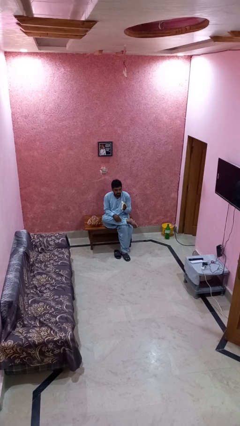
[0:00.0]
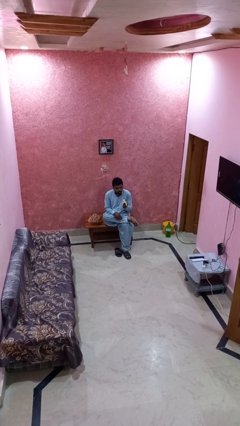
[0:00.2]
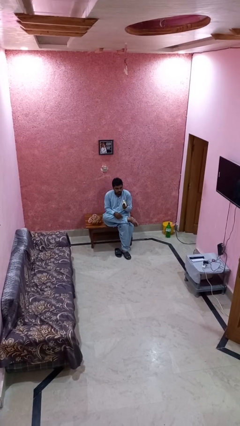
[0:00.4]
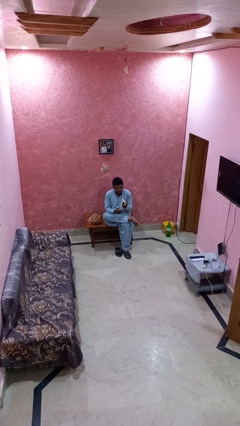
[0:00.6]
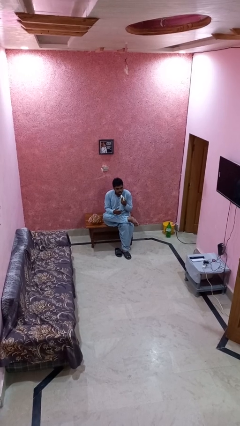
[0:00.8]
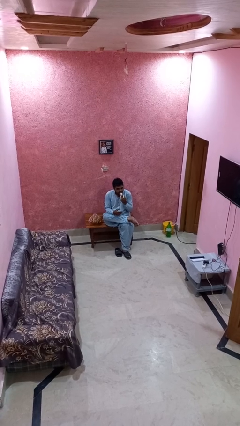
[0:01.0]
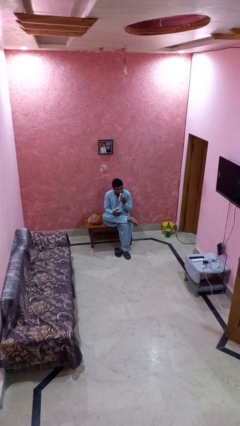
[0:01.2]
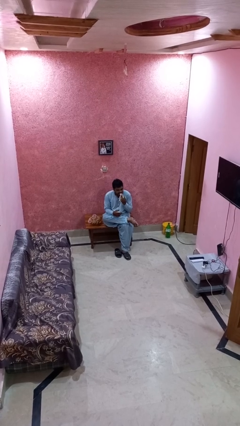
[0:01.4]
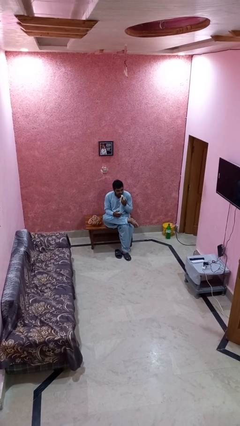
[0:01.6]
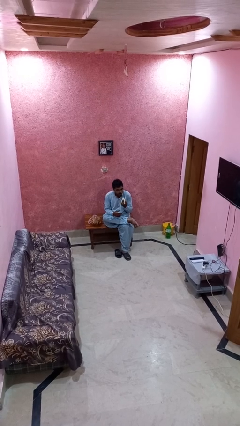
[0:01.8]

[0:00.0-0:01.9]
person eats banana

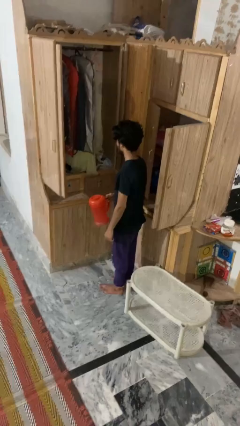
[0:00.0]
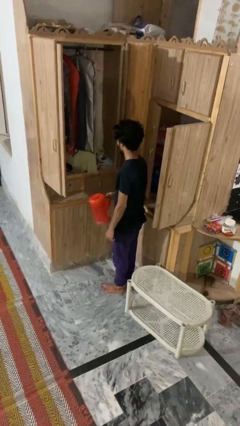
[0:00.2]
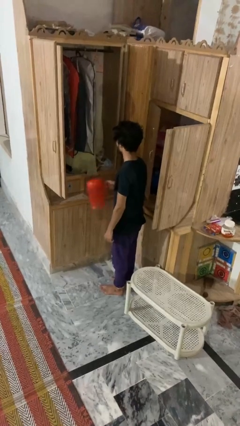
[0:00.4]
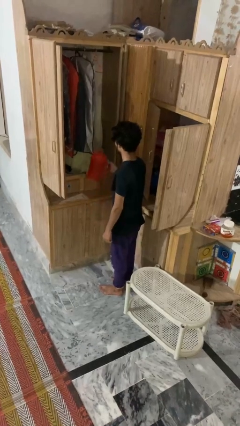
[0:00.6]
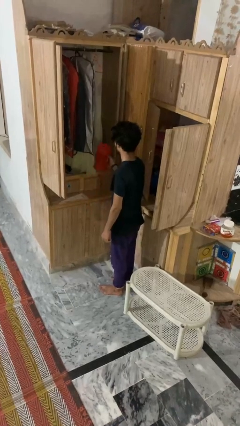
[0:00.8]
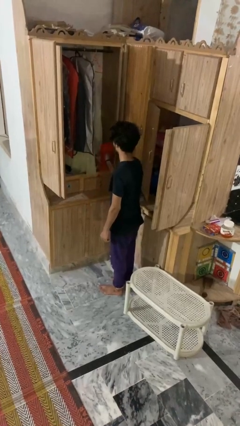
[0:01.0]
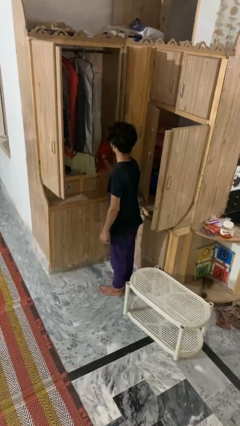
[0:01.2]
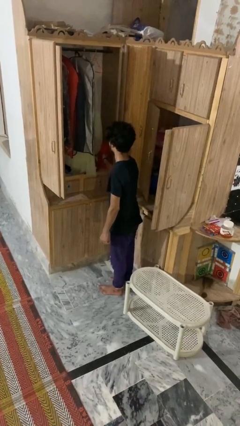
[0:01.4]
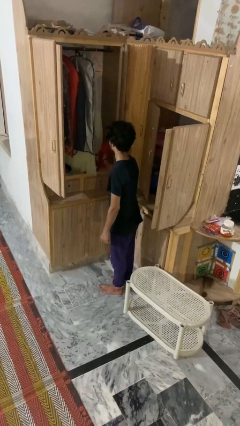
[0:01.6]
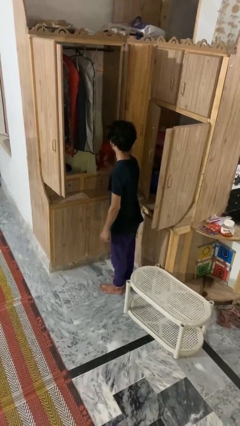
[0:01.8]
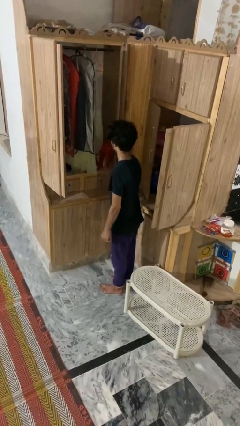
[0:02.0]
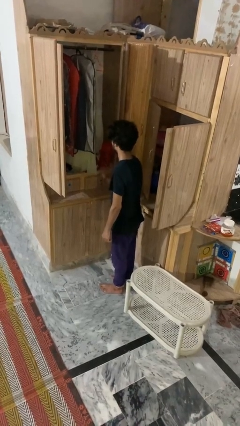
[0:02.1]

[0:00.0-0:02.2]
person puts down object into cabinet

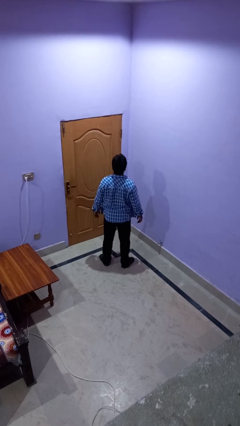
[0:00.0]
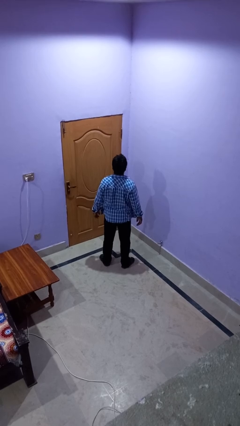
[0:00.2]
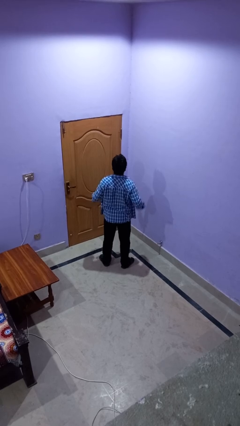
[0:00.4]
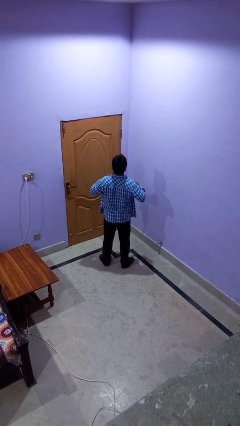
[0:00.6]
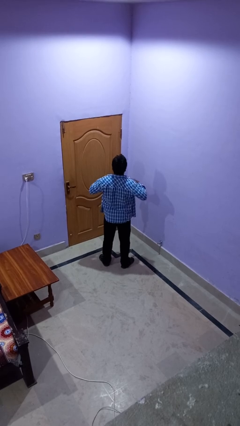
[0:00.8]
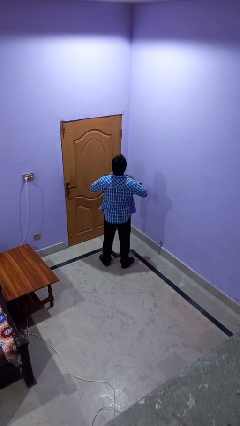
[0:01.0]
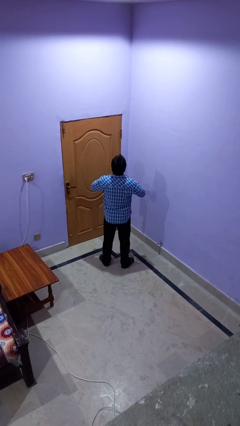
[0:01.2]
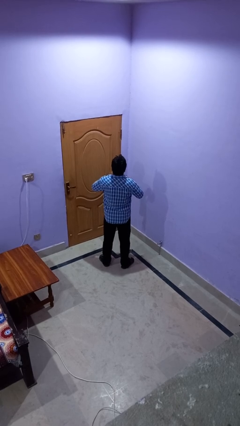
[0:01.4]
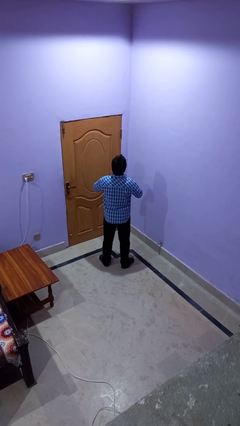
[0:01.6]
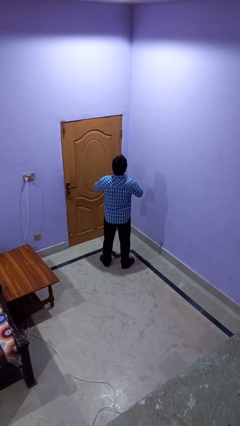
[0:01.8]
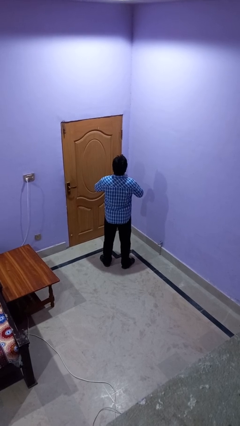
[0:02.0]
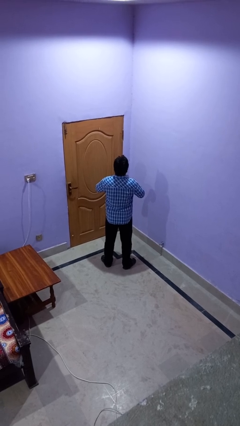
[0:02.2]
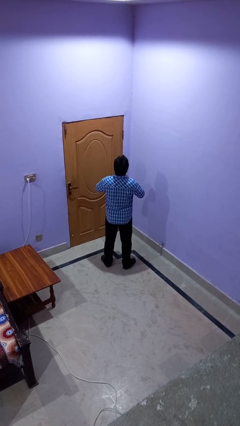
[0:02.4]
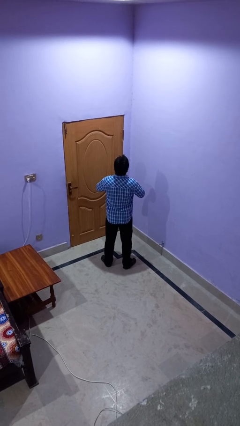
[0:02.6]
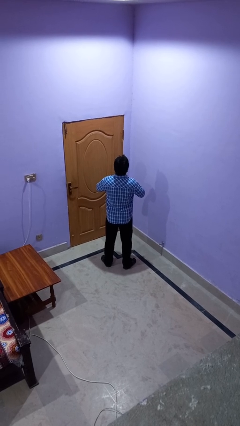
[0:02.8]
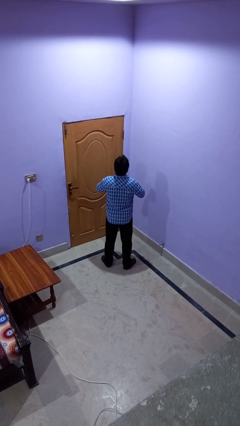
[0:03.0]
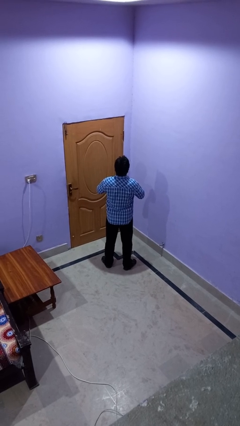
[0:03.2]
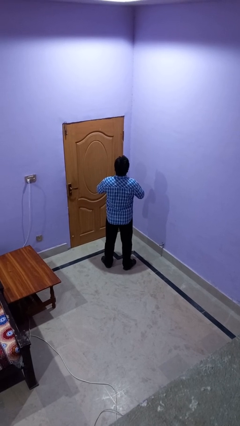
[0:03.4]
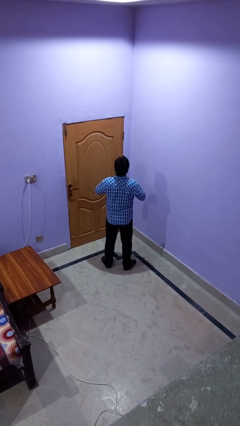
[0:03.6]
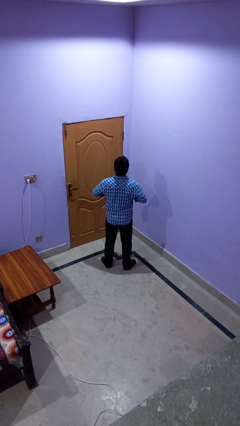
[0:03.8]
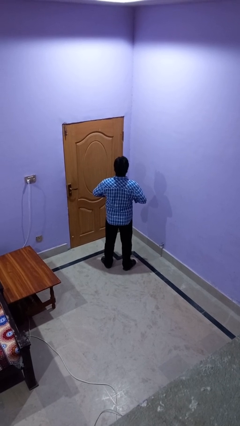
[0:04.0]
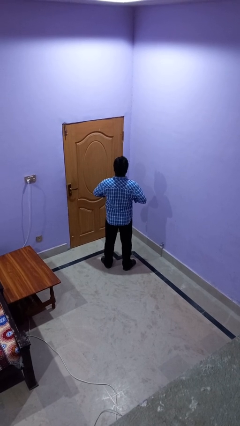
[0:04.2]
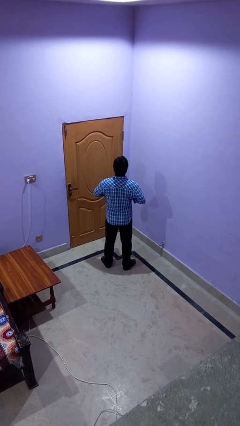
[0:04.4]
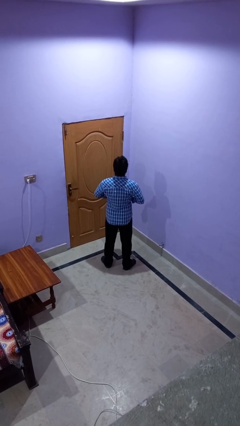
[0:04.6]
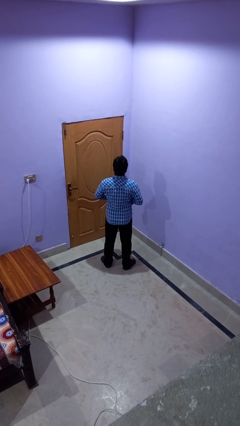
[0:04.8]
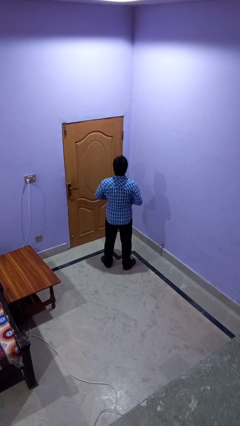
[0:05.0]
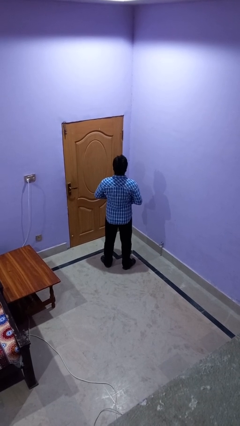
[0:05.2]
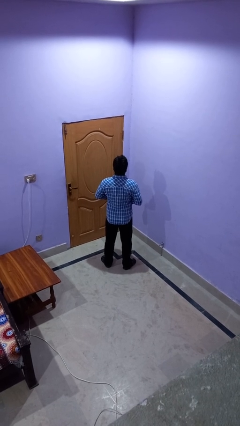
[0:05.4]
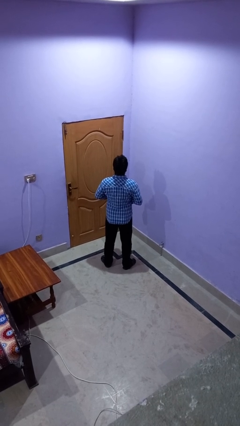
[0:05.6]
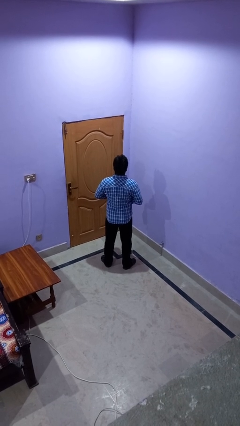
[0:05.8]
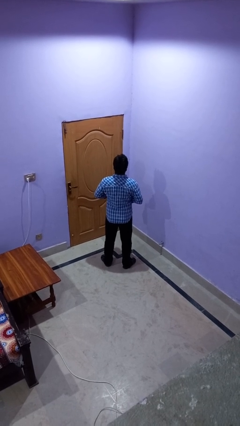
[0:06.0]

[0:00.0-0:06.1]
person buttons shirt

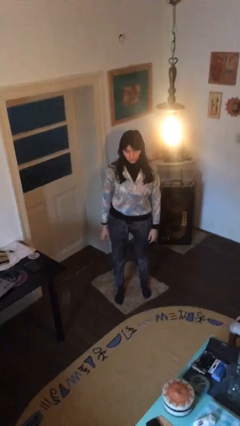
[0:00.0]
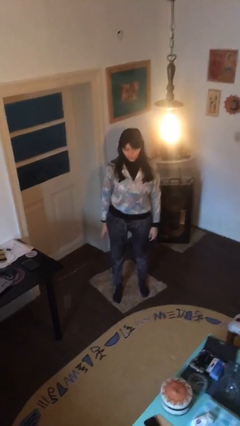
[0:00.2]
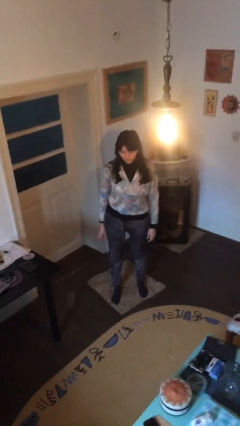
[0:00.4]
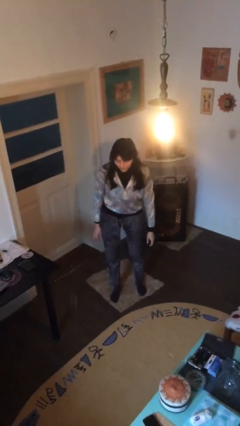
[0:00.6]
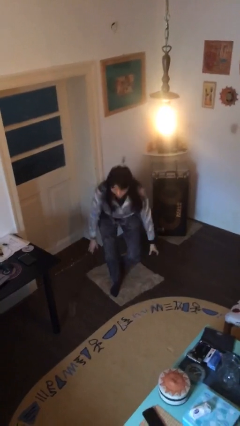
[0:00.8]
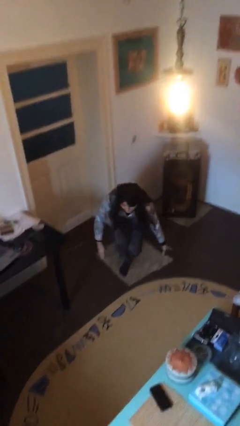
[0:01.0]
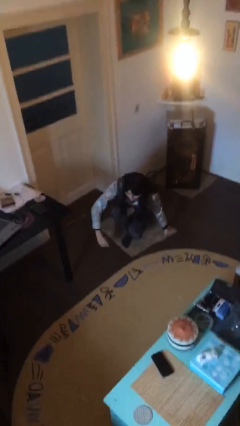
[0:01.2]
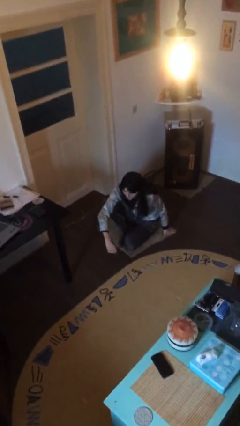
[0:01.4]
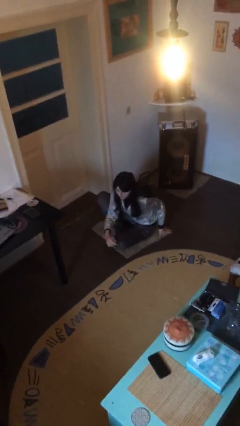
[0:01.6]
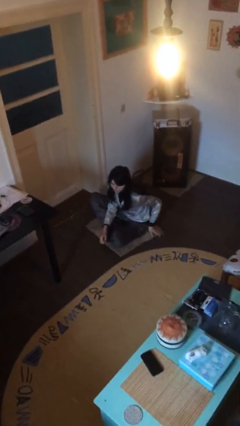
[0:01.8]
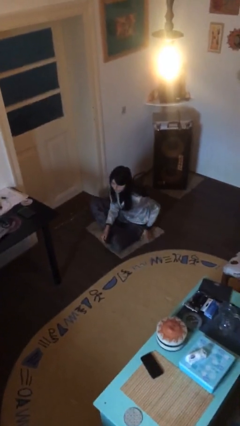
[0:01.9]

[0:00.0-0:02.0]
person sits down

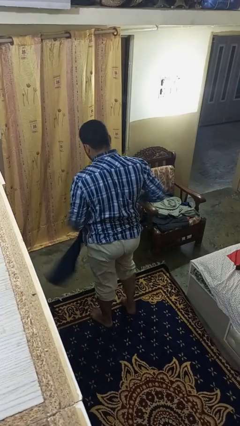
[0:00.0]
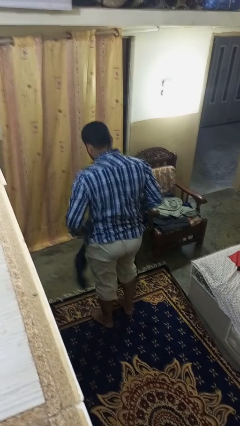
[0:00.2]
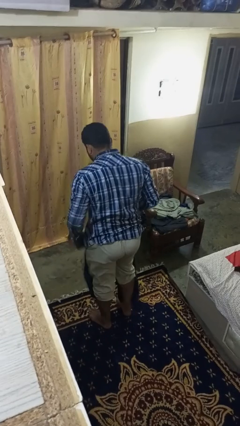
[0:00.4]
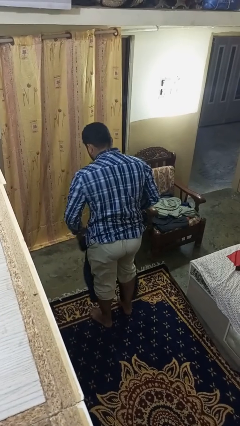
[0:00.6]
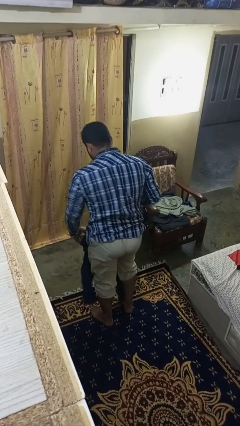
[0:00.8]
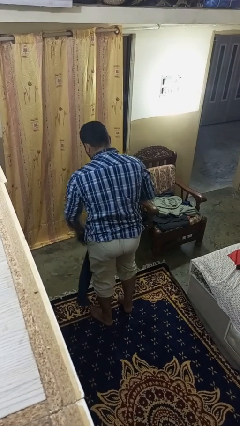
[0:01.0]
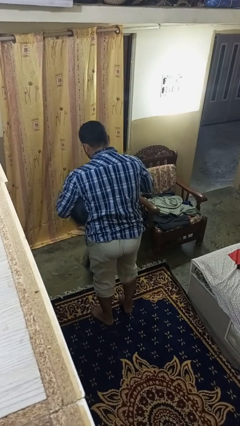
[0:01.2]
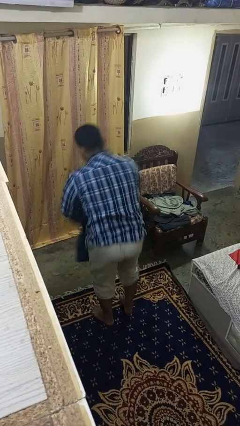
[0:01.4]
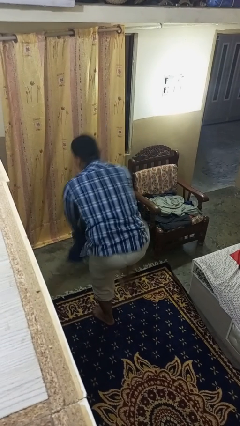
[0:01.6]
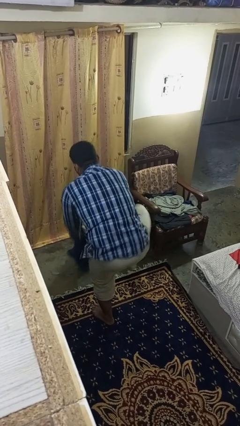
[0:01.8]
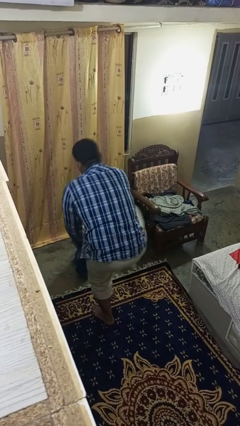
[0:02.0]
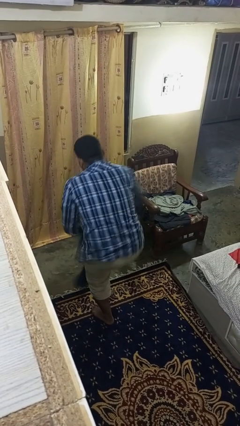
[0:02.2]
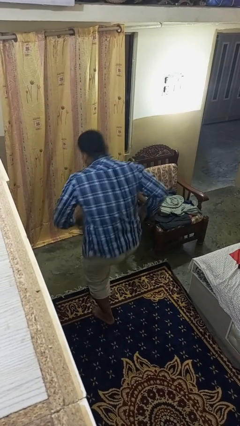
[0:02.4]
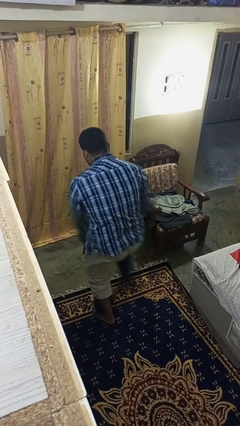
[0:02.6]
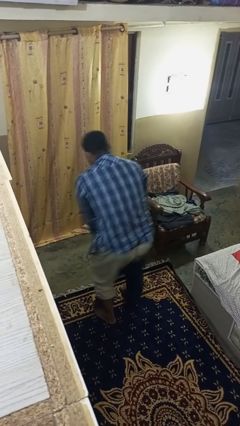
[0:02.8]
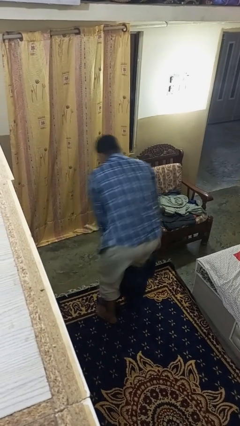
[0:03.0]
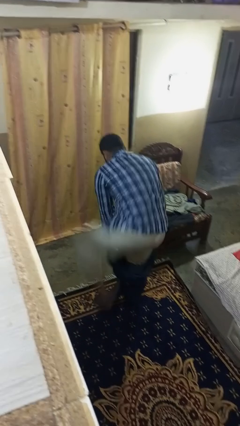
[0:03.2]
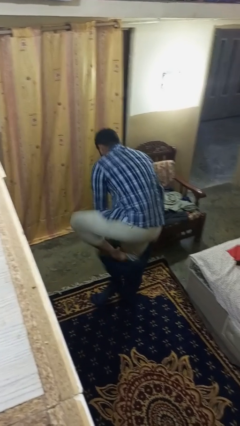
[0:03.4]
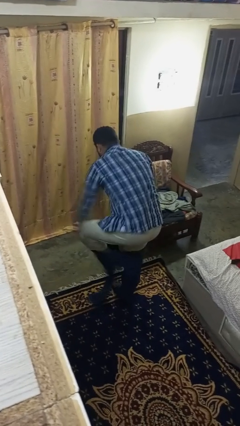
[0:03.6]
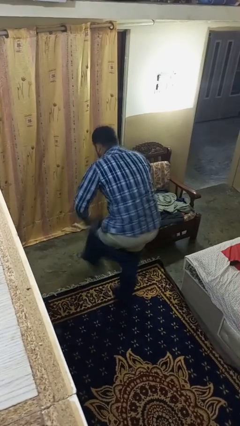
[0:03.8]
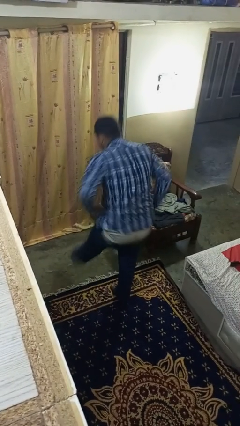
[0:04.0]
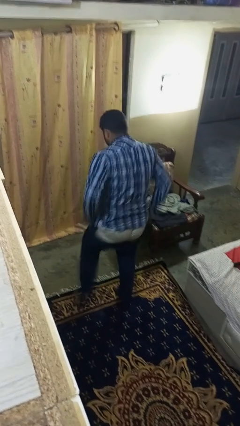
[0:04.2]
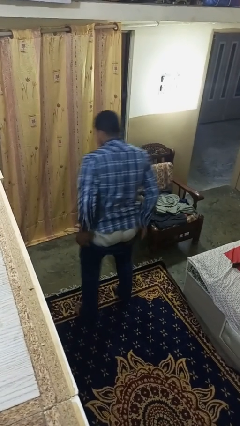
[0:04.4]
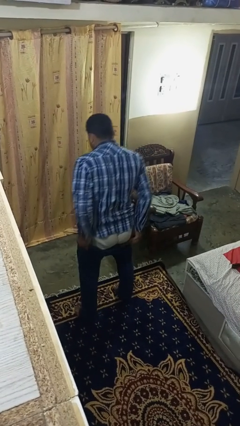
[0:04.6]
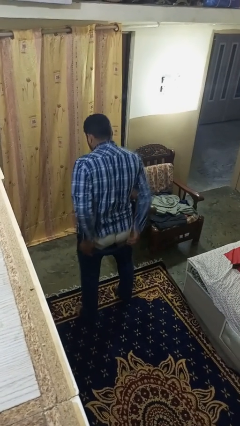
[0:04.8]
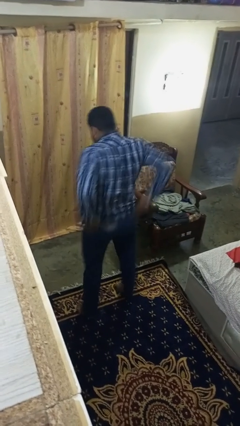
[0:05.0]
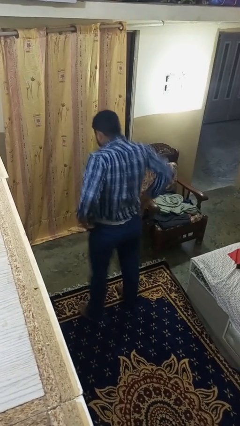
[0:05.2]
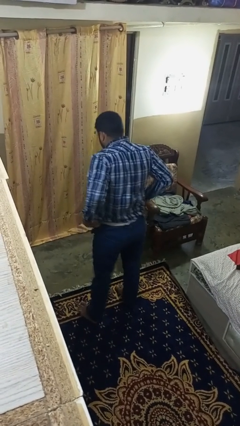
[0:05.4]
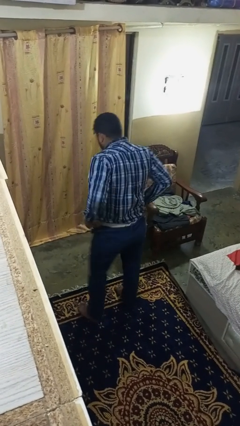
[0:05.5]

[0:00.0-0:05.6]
person puts on pants

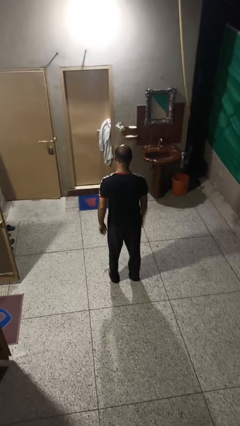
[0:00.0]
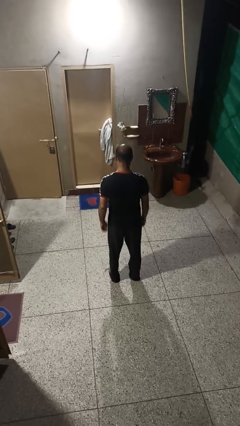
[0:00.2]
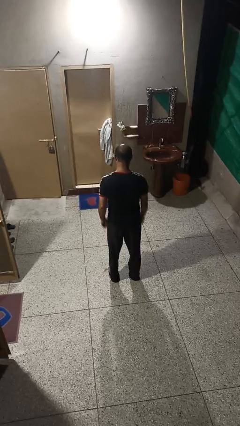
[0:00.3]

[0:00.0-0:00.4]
person rubs neck
